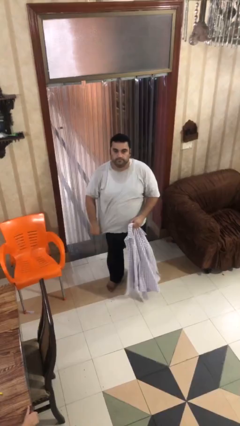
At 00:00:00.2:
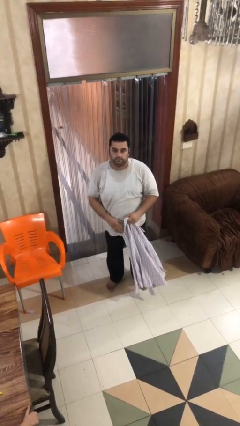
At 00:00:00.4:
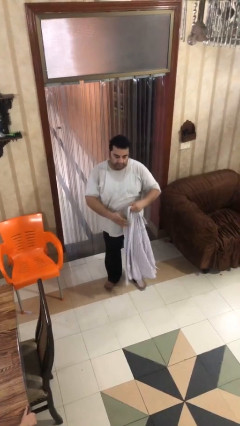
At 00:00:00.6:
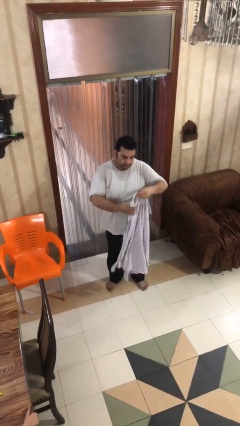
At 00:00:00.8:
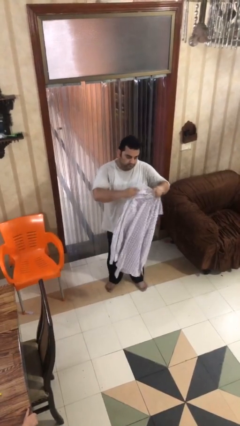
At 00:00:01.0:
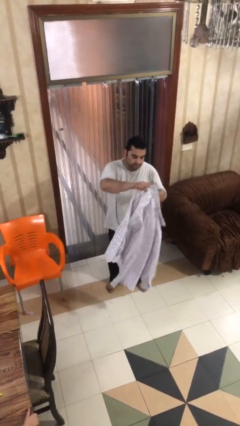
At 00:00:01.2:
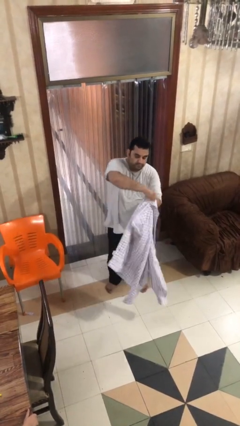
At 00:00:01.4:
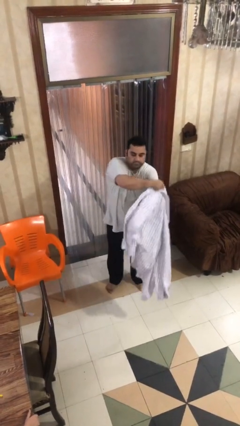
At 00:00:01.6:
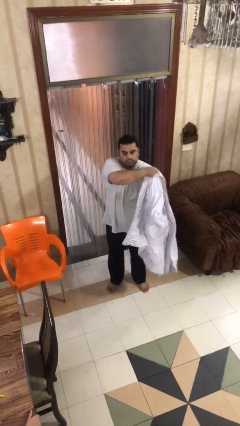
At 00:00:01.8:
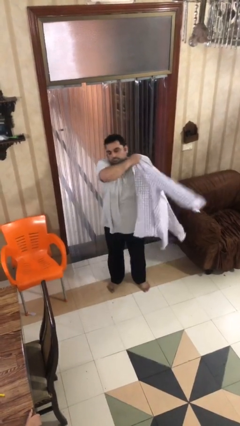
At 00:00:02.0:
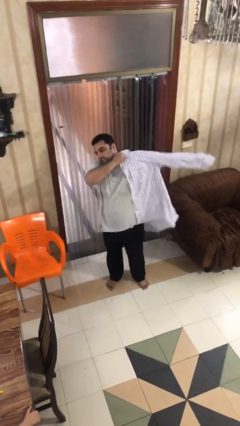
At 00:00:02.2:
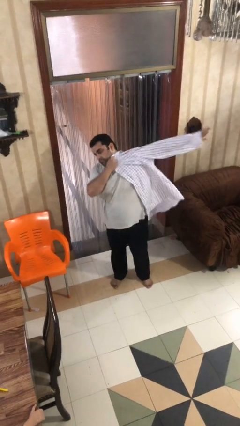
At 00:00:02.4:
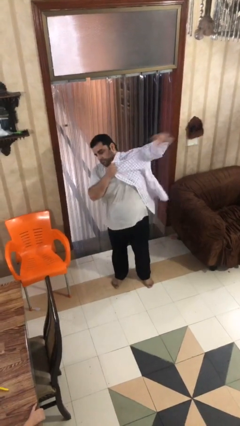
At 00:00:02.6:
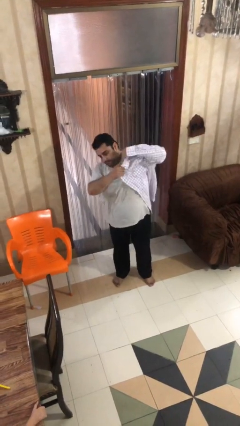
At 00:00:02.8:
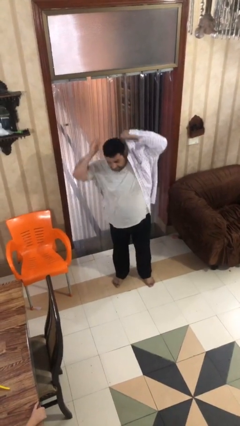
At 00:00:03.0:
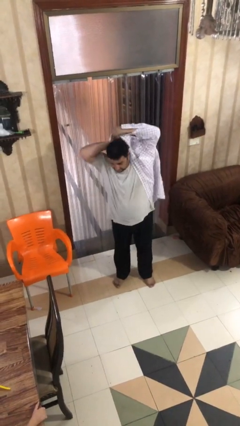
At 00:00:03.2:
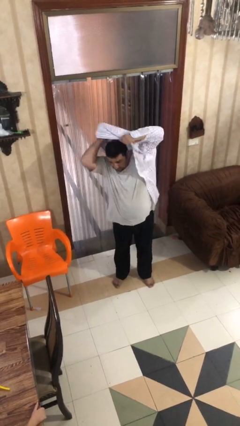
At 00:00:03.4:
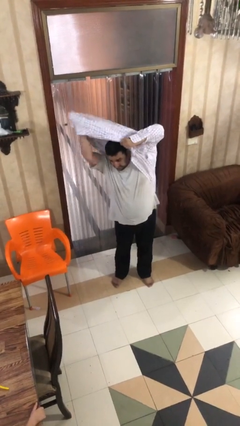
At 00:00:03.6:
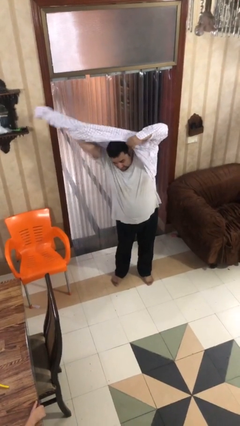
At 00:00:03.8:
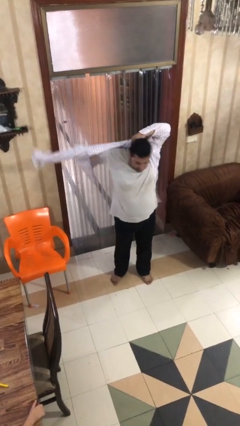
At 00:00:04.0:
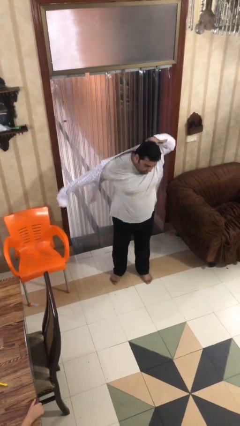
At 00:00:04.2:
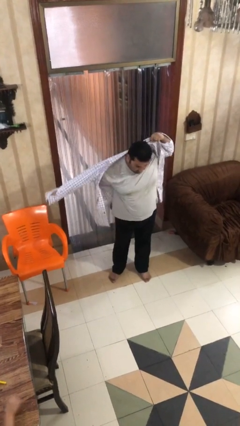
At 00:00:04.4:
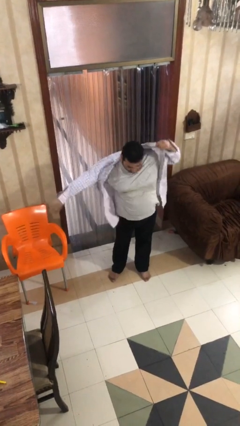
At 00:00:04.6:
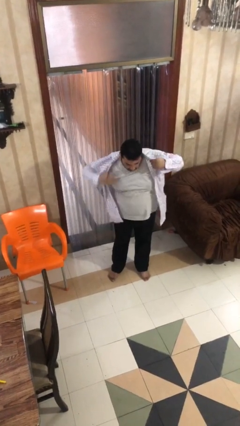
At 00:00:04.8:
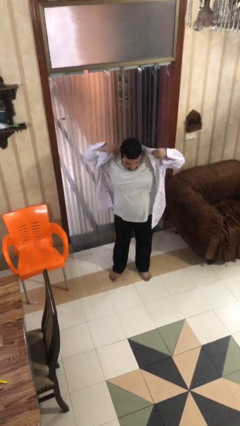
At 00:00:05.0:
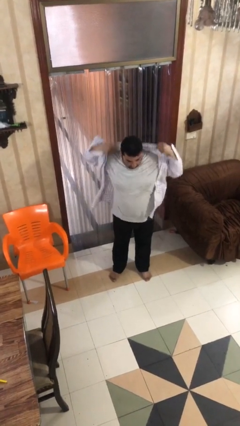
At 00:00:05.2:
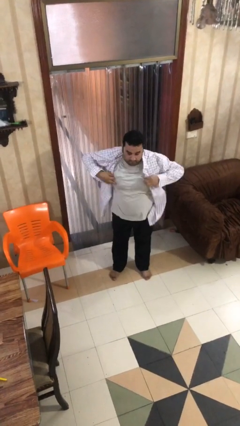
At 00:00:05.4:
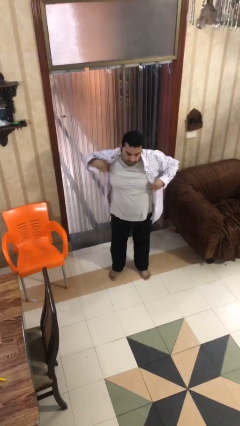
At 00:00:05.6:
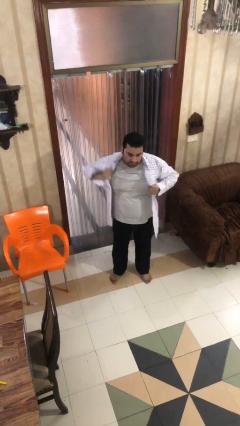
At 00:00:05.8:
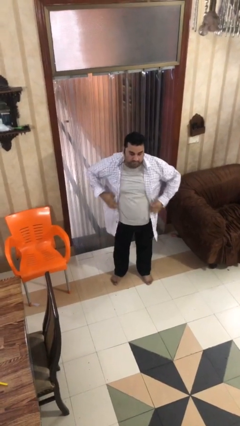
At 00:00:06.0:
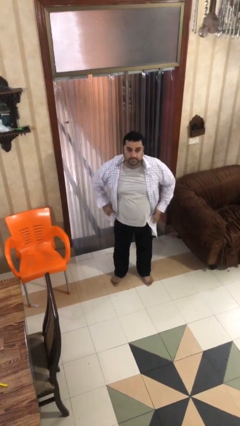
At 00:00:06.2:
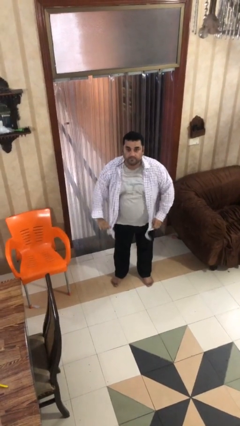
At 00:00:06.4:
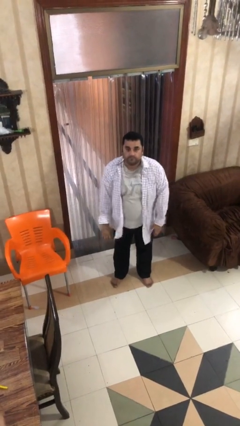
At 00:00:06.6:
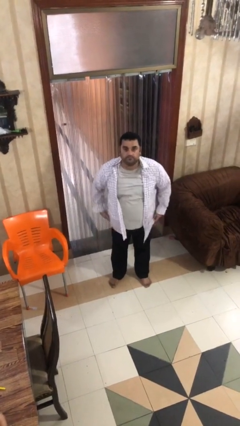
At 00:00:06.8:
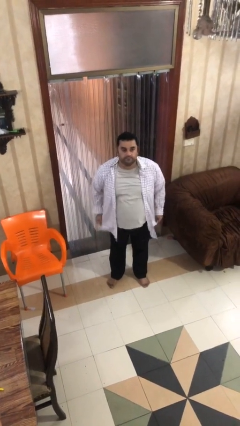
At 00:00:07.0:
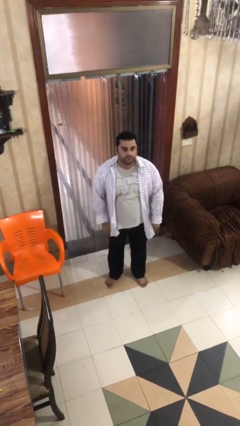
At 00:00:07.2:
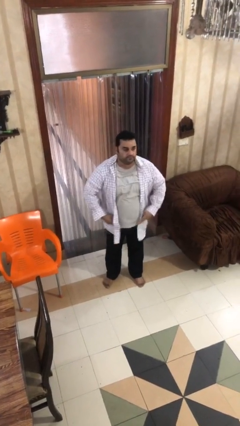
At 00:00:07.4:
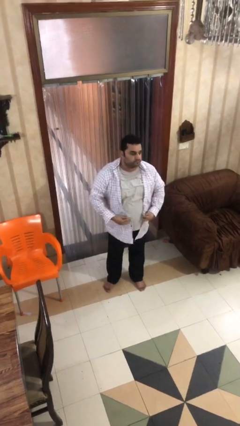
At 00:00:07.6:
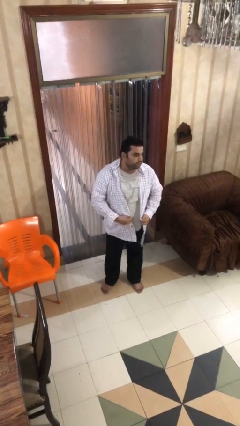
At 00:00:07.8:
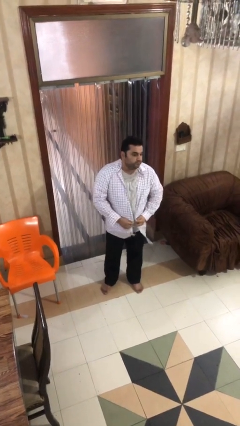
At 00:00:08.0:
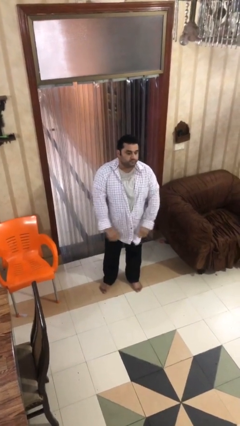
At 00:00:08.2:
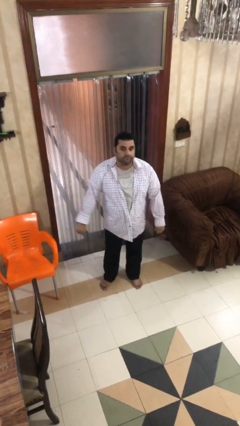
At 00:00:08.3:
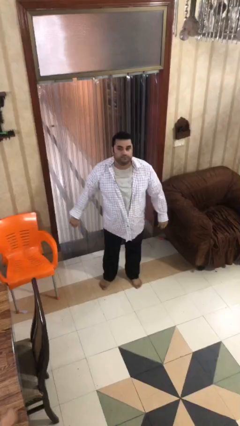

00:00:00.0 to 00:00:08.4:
person puts on shirt

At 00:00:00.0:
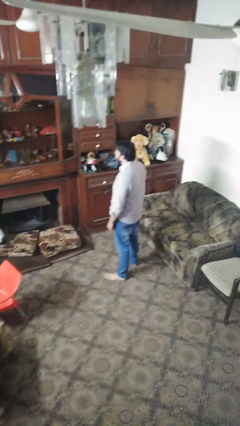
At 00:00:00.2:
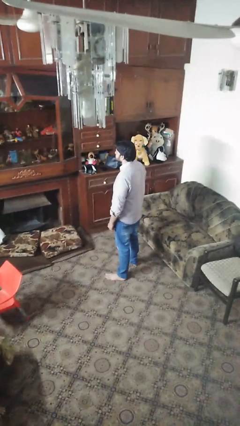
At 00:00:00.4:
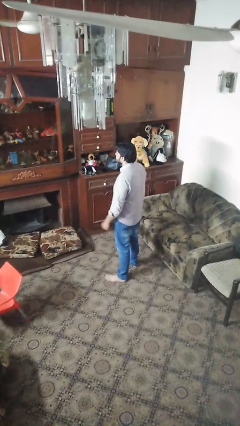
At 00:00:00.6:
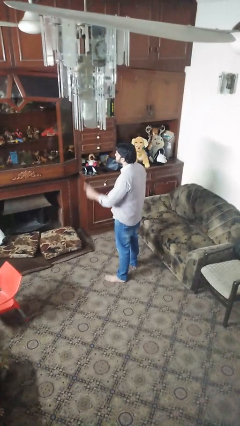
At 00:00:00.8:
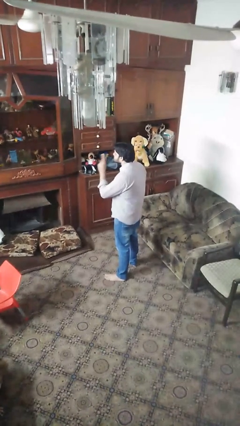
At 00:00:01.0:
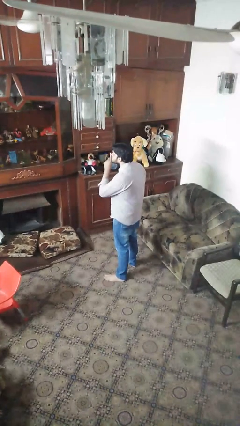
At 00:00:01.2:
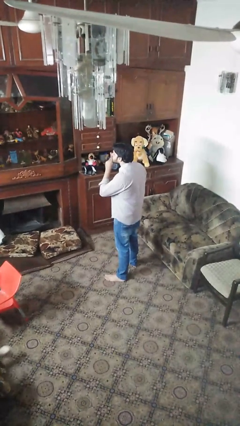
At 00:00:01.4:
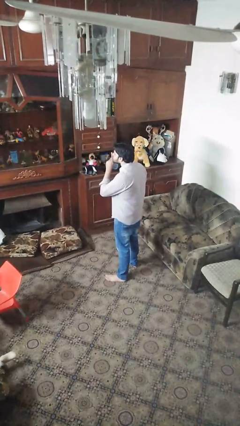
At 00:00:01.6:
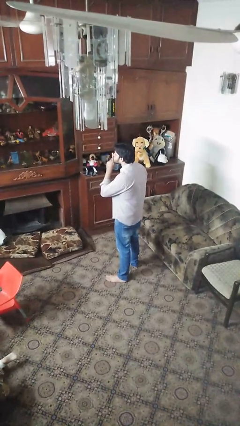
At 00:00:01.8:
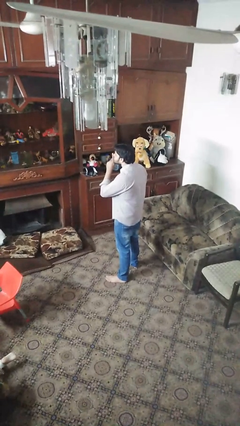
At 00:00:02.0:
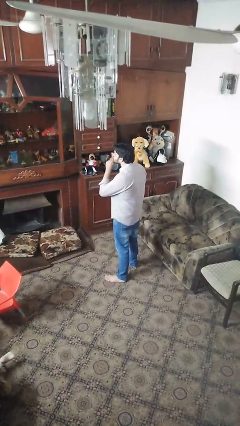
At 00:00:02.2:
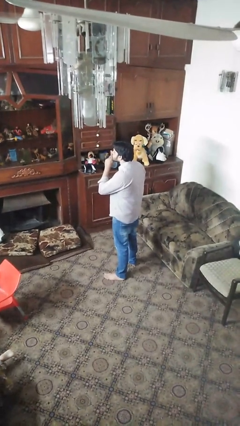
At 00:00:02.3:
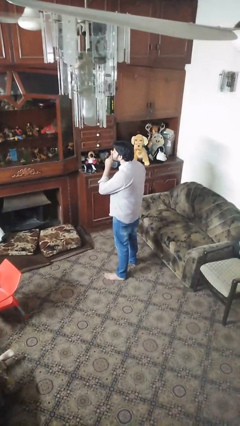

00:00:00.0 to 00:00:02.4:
person gestures be quiet

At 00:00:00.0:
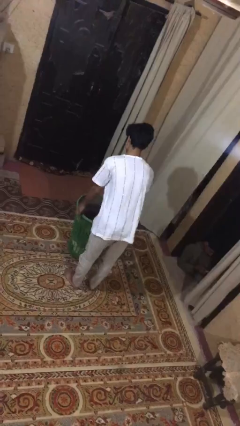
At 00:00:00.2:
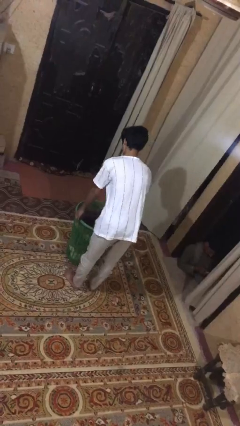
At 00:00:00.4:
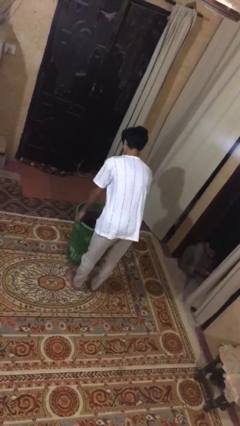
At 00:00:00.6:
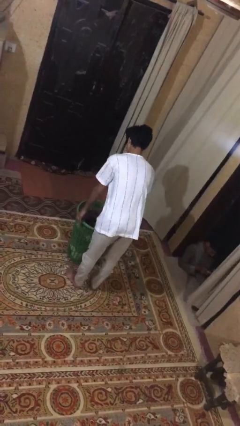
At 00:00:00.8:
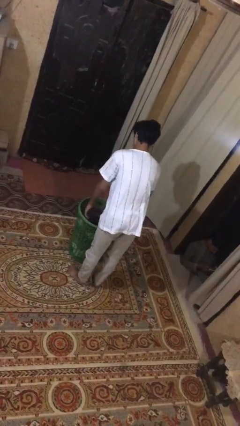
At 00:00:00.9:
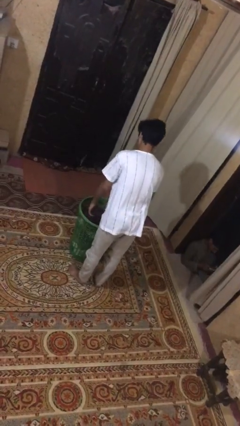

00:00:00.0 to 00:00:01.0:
person puts down object on floor

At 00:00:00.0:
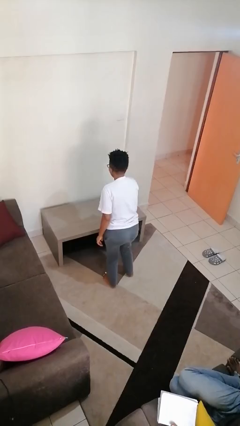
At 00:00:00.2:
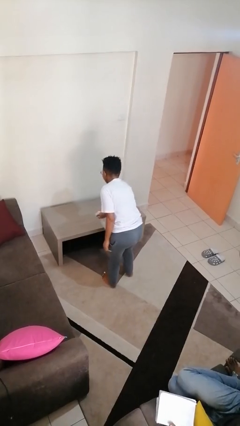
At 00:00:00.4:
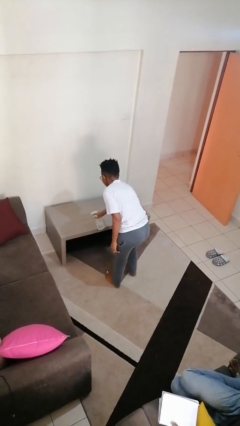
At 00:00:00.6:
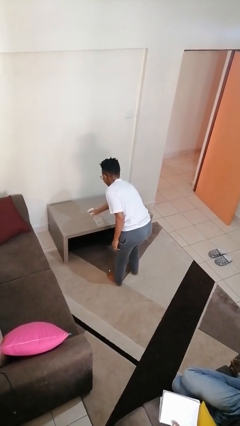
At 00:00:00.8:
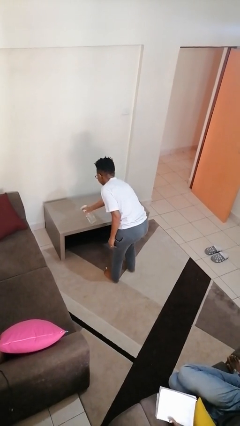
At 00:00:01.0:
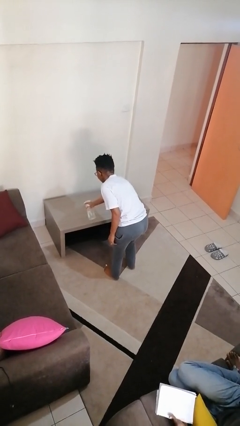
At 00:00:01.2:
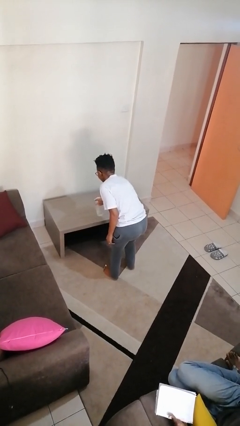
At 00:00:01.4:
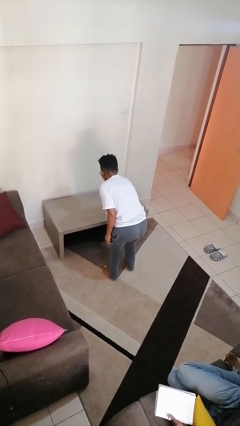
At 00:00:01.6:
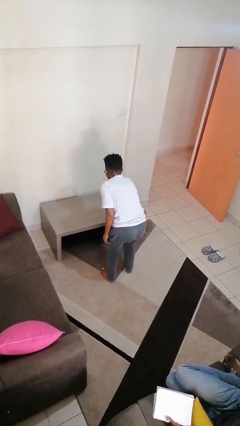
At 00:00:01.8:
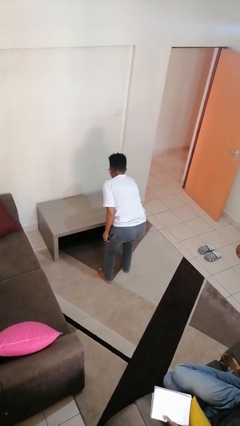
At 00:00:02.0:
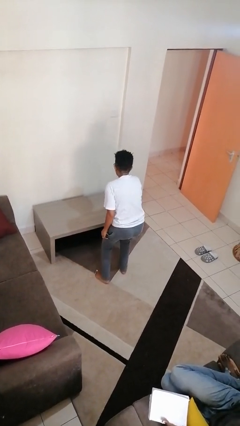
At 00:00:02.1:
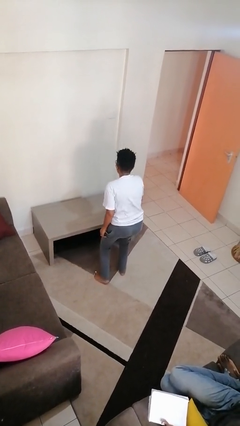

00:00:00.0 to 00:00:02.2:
person sprays from bottle

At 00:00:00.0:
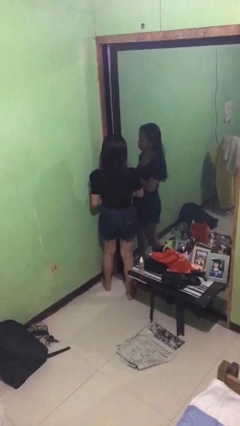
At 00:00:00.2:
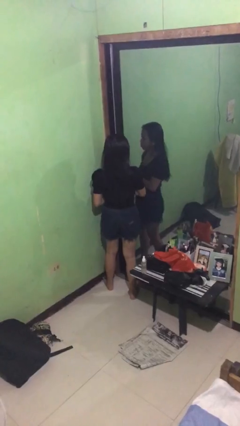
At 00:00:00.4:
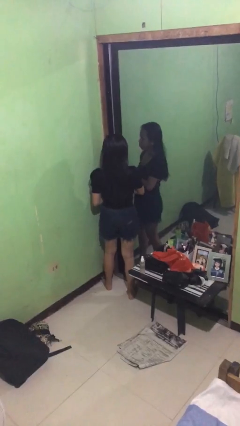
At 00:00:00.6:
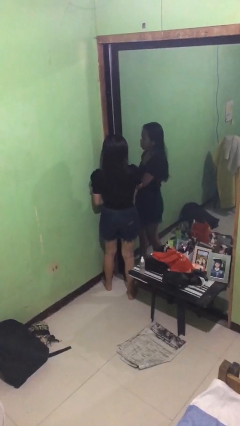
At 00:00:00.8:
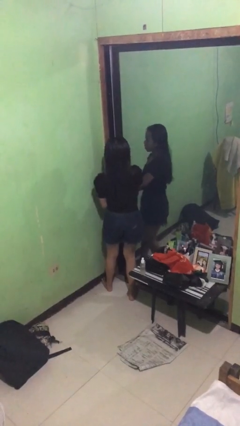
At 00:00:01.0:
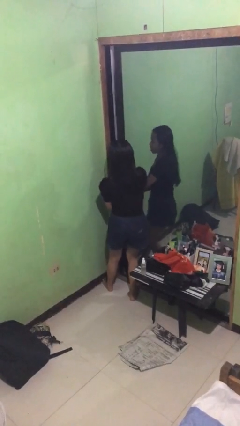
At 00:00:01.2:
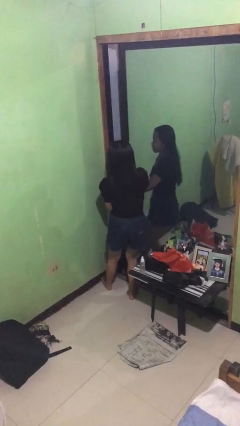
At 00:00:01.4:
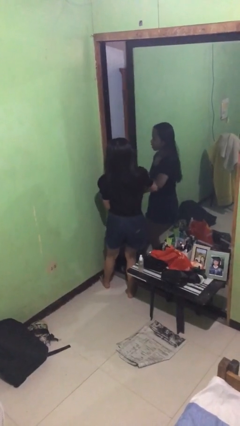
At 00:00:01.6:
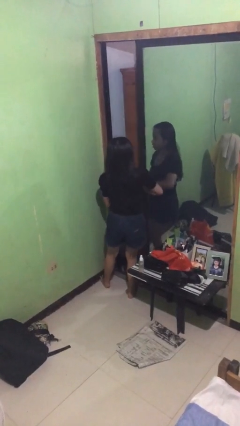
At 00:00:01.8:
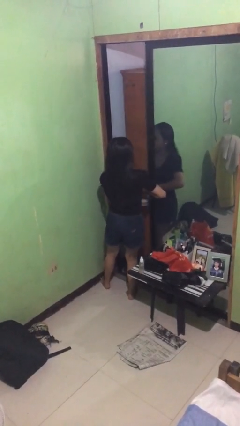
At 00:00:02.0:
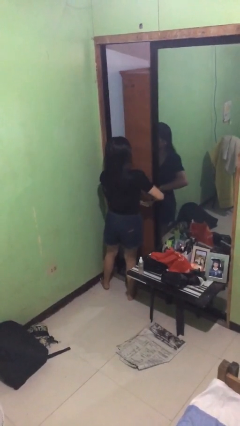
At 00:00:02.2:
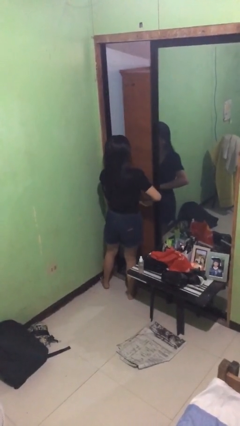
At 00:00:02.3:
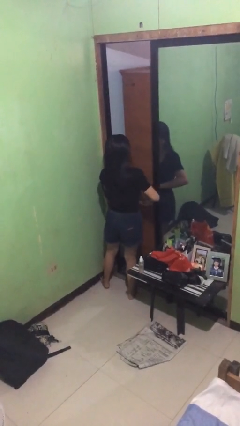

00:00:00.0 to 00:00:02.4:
person opens sliding door

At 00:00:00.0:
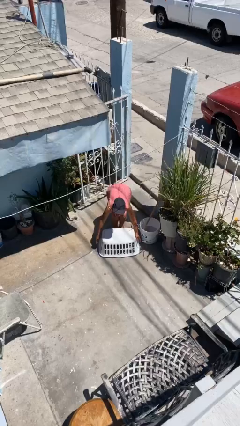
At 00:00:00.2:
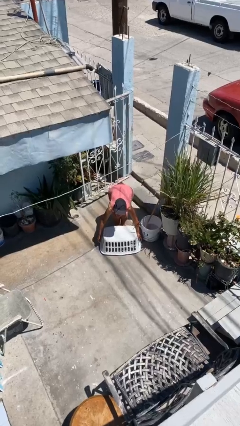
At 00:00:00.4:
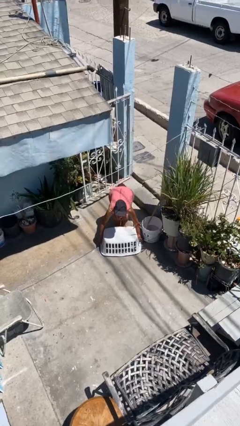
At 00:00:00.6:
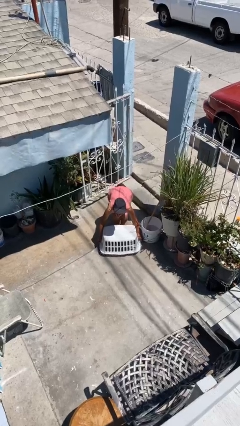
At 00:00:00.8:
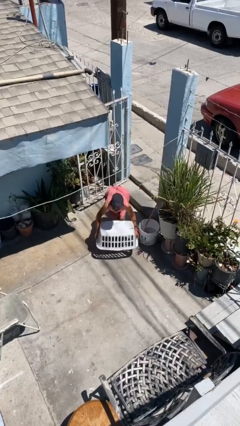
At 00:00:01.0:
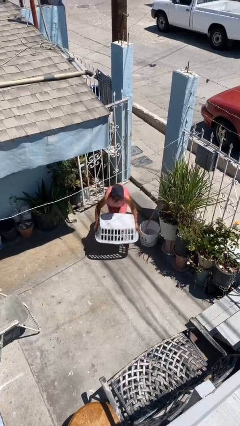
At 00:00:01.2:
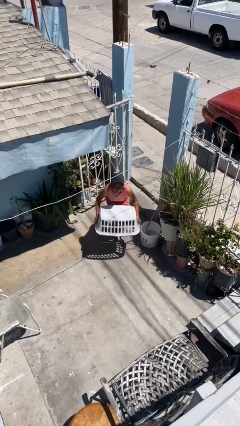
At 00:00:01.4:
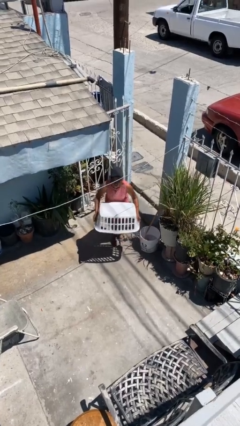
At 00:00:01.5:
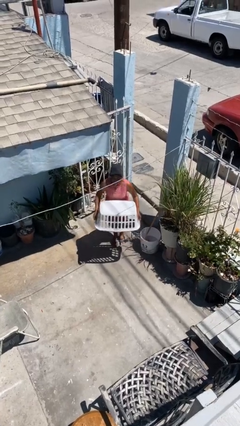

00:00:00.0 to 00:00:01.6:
person picks up object from floor
